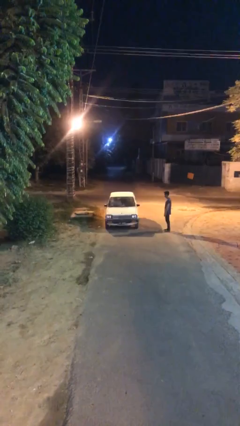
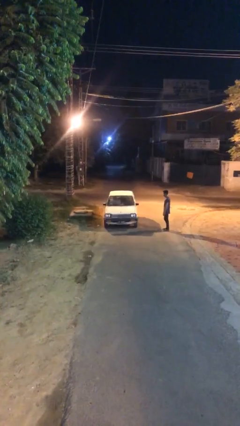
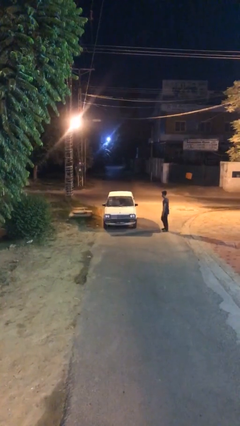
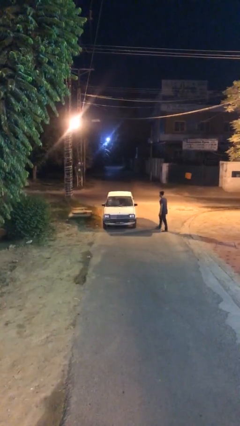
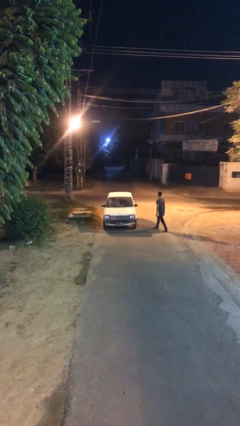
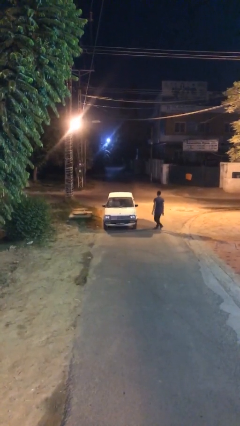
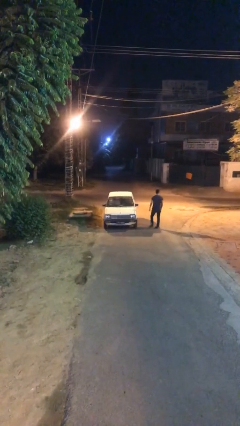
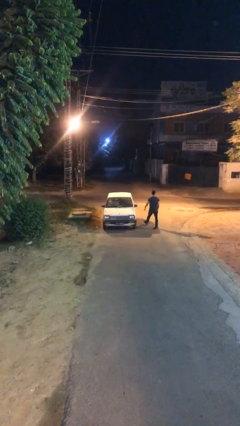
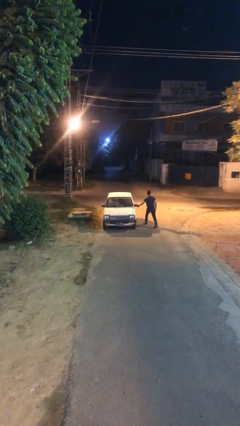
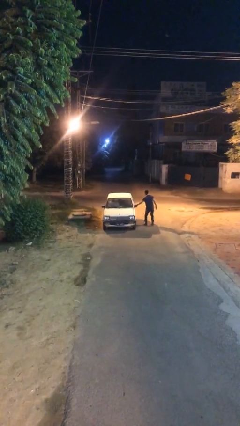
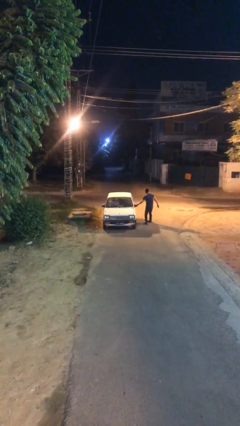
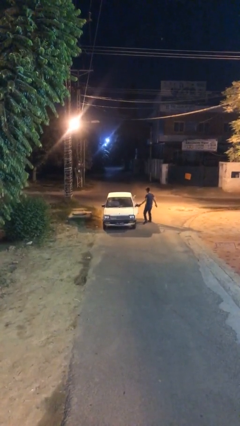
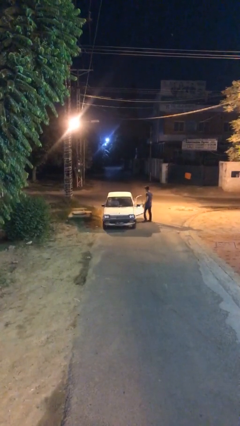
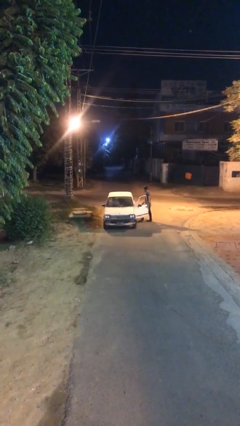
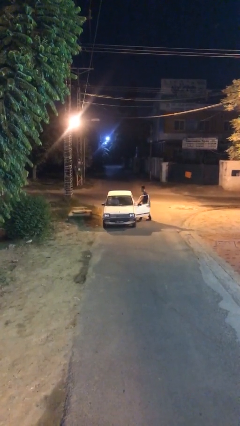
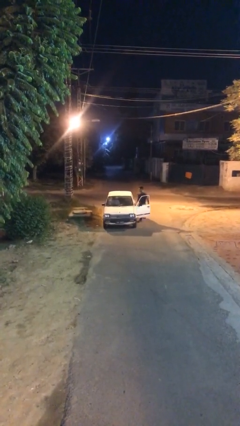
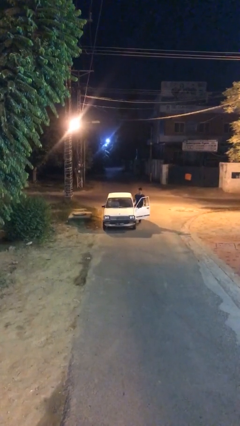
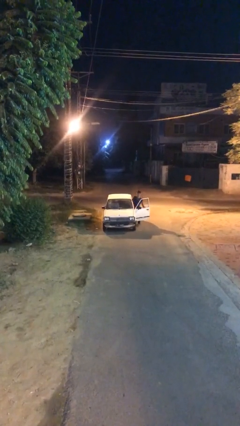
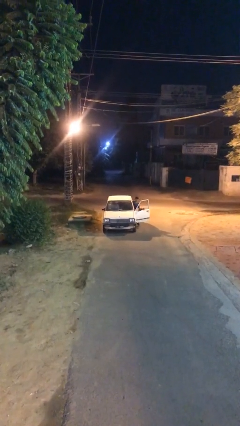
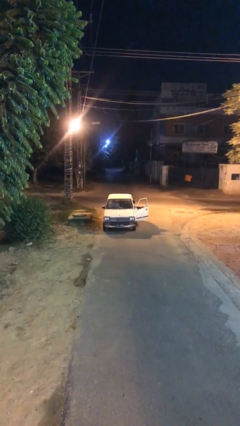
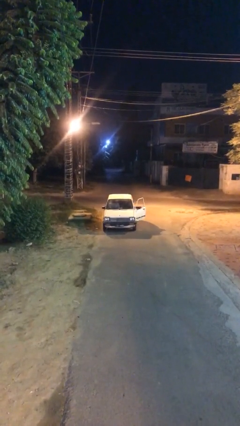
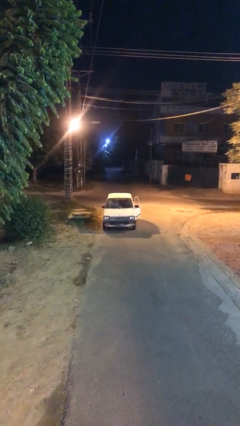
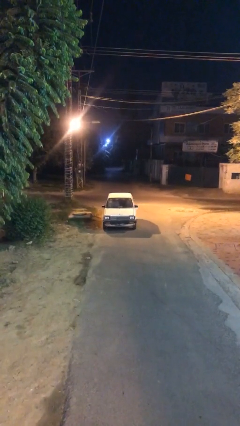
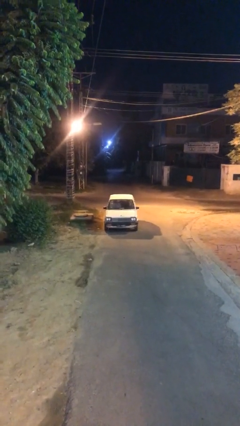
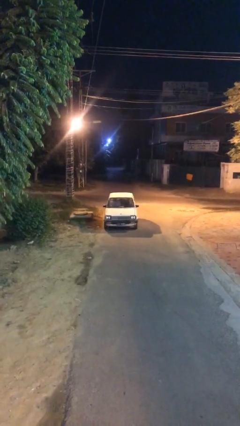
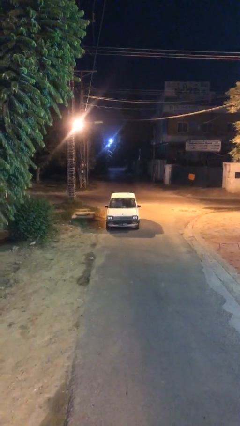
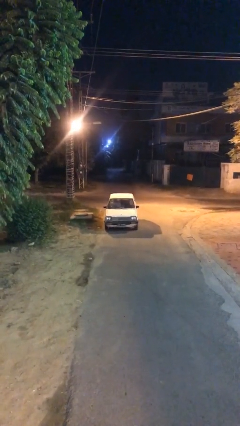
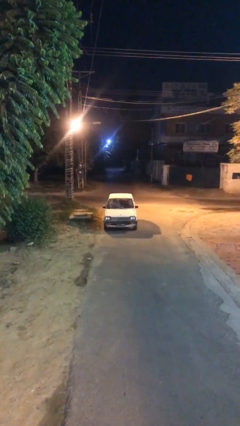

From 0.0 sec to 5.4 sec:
car picks up person

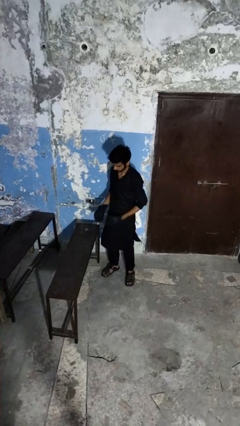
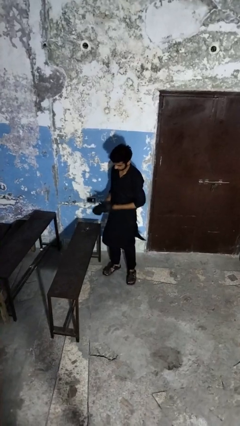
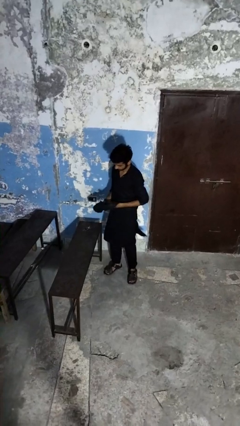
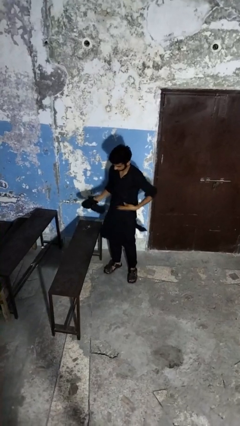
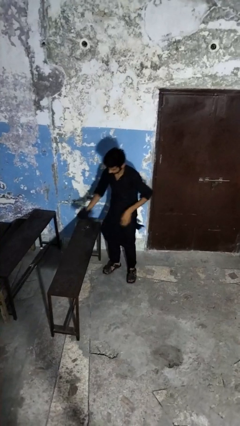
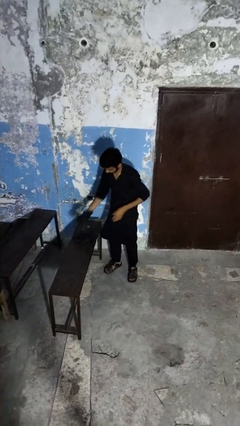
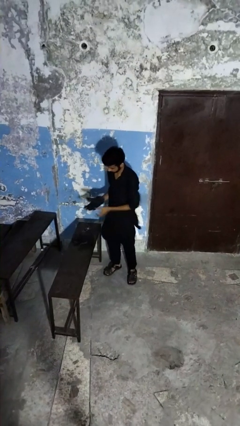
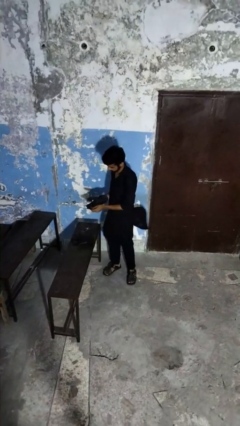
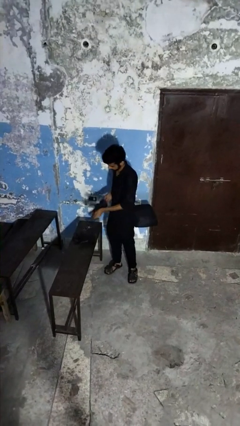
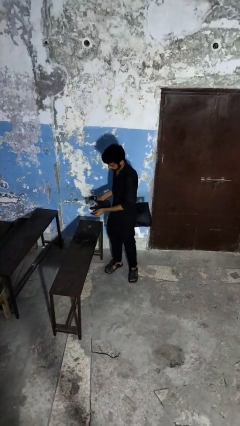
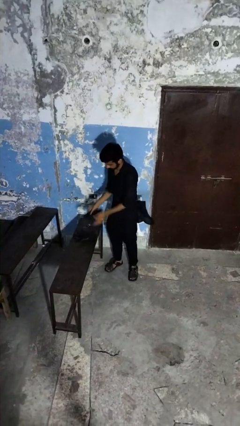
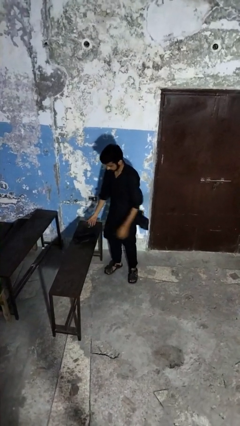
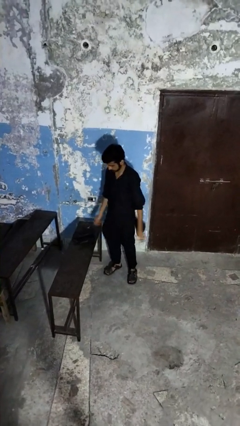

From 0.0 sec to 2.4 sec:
person takes off gloves

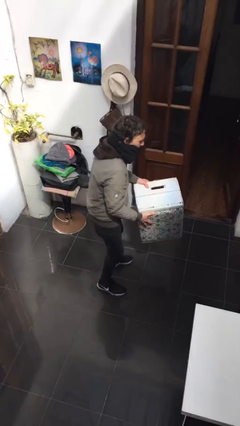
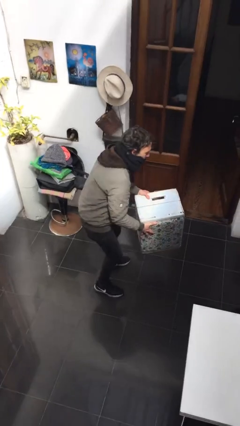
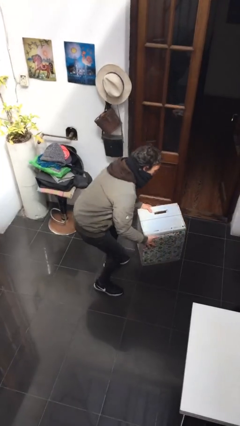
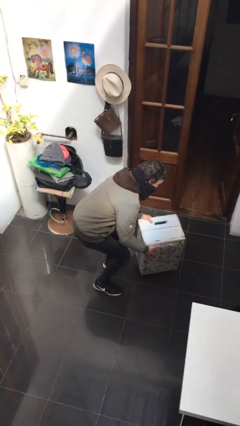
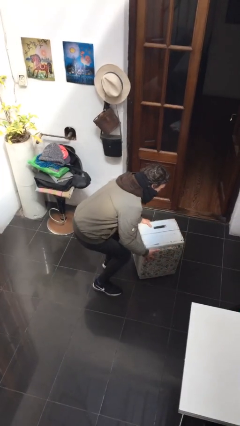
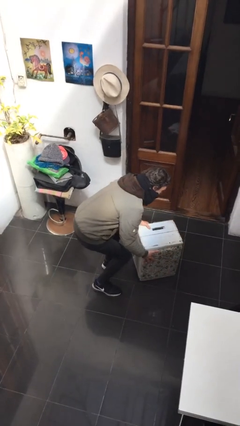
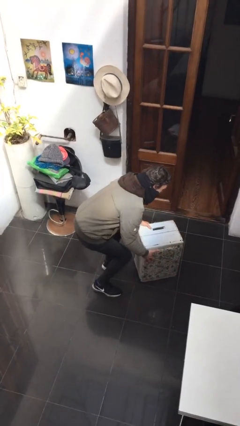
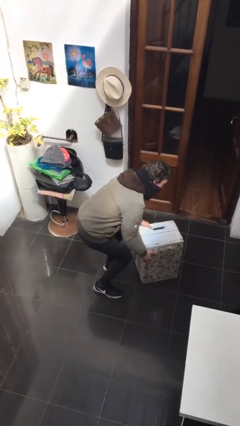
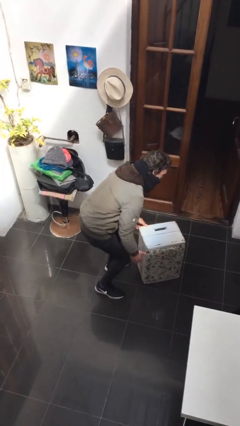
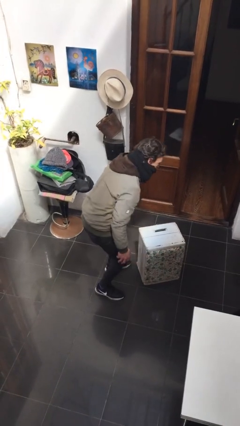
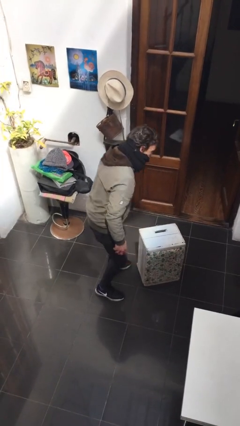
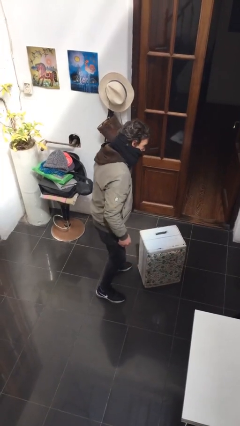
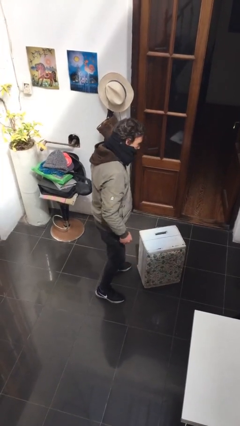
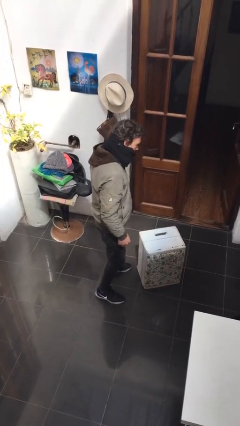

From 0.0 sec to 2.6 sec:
person puts down object on floor

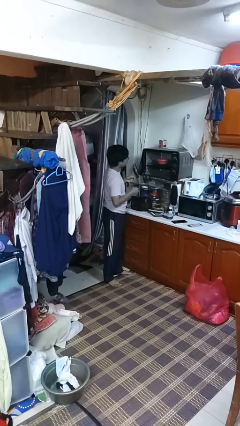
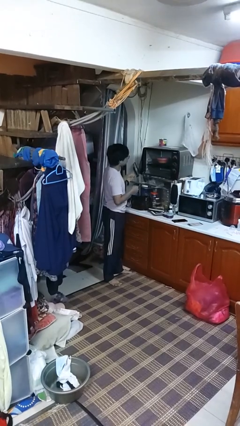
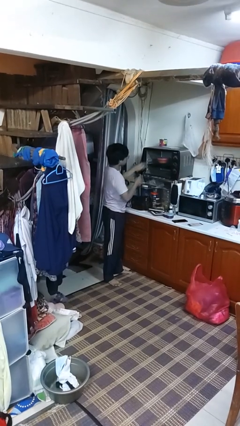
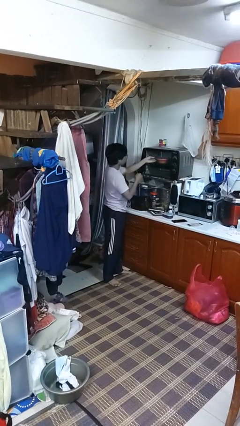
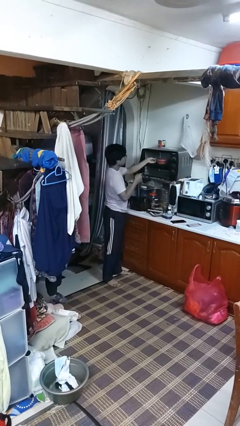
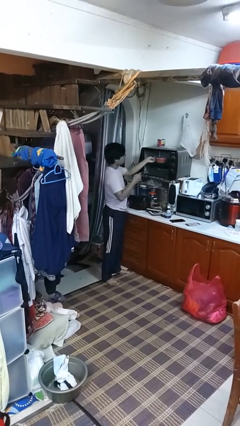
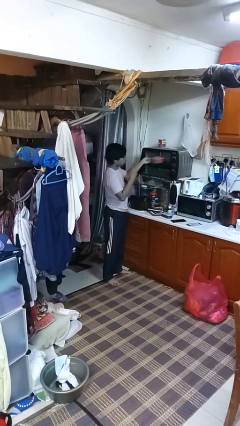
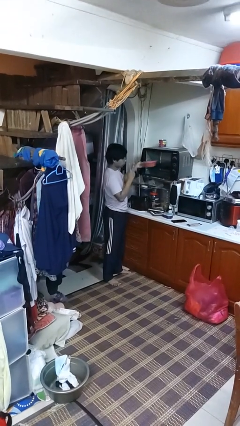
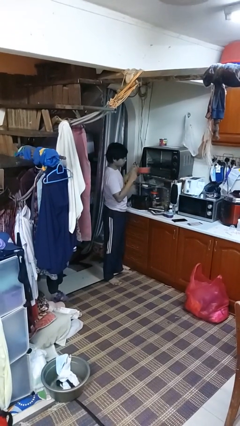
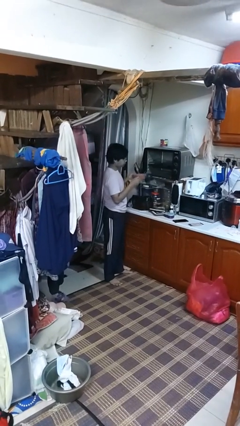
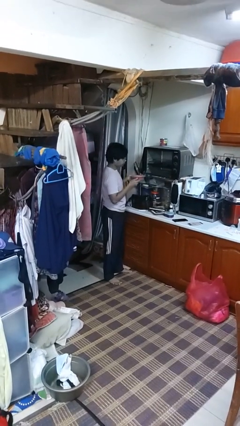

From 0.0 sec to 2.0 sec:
person takes object from oven

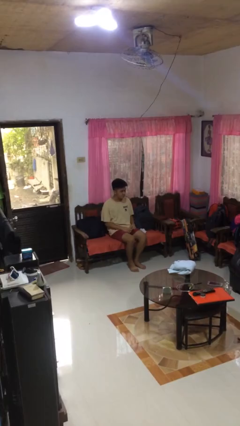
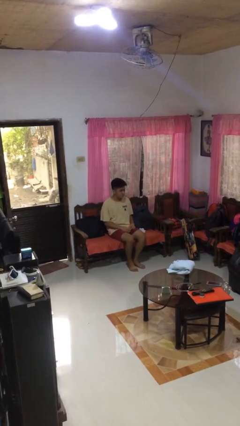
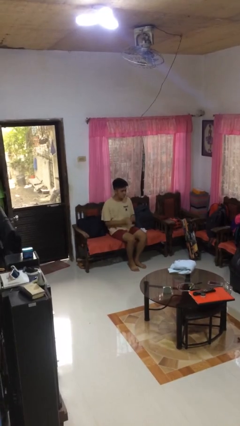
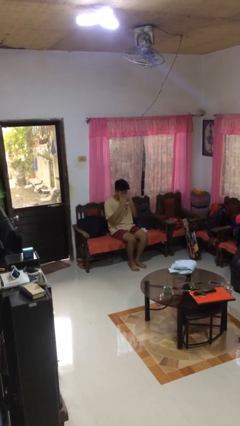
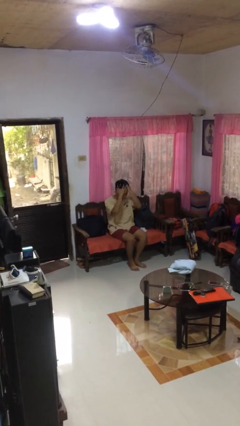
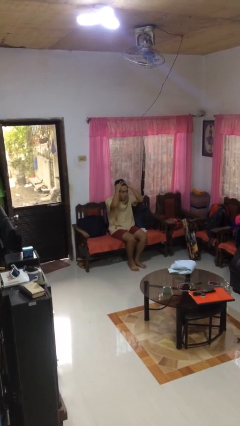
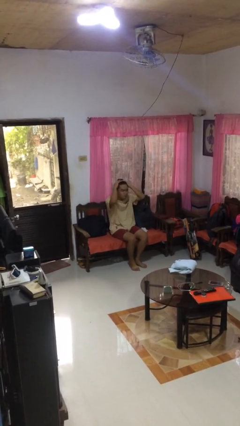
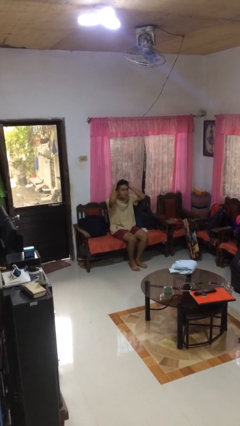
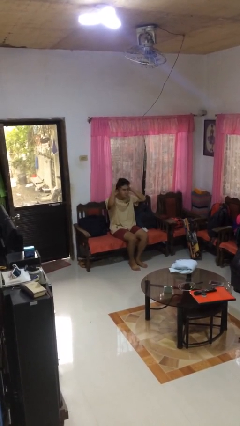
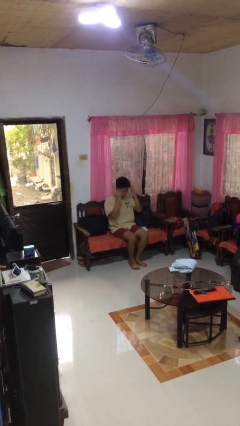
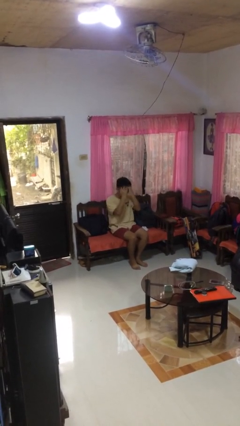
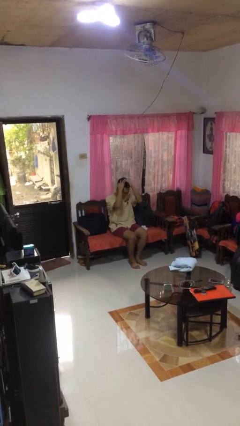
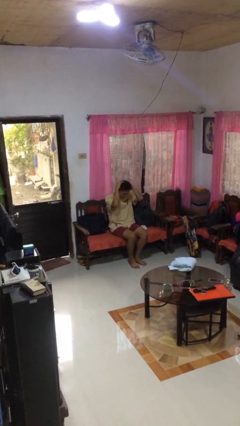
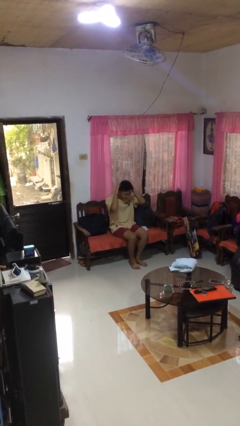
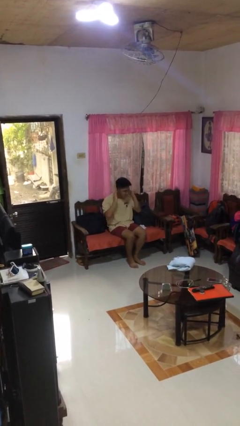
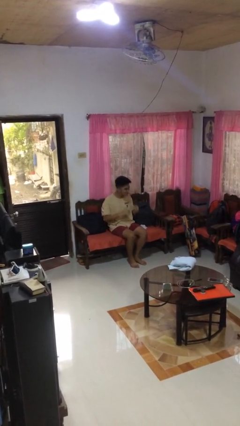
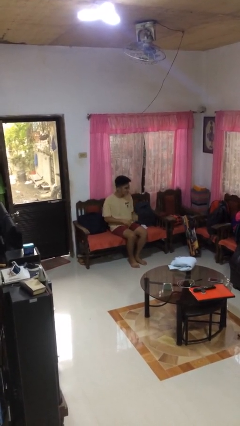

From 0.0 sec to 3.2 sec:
person strokes hair

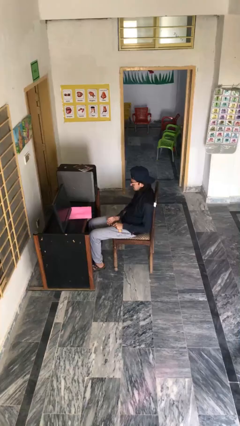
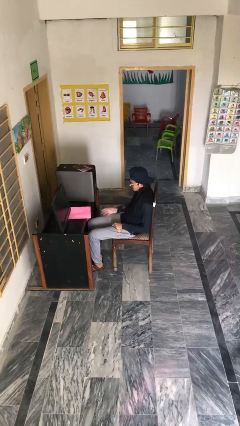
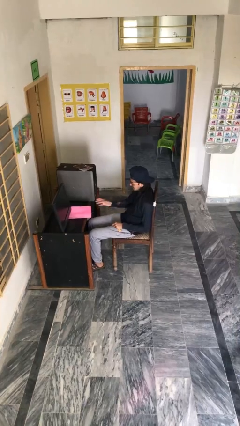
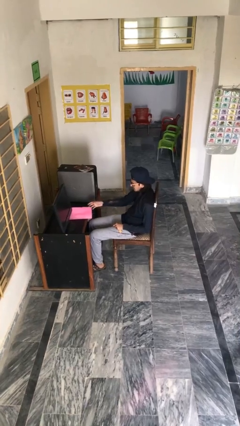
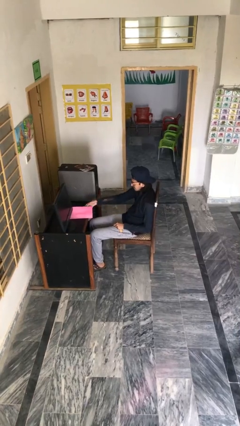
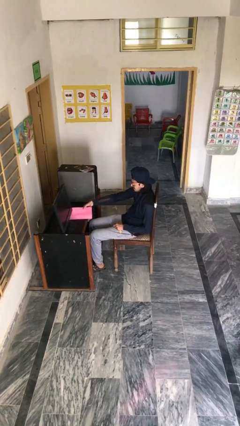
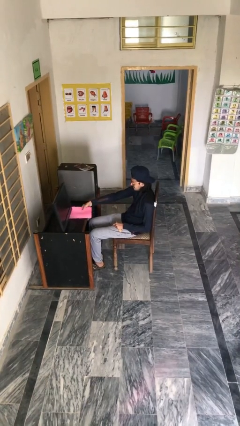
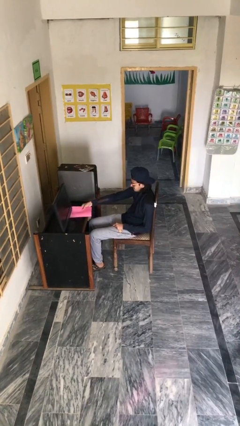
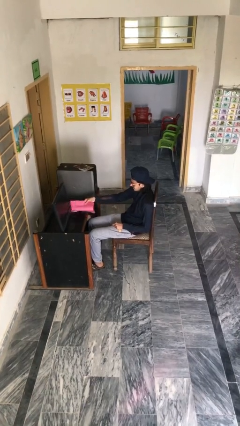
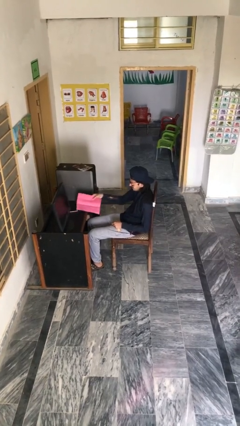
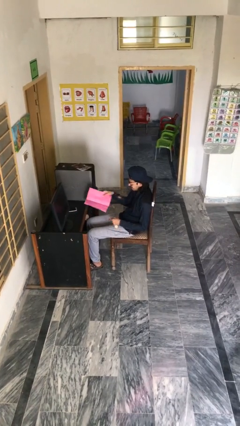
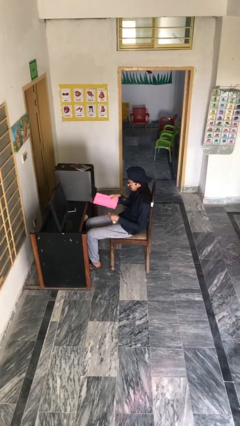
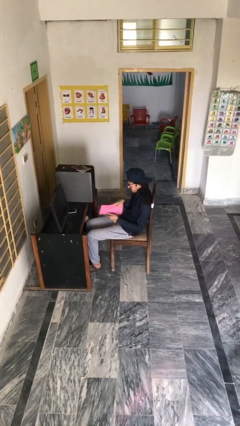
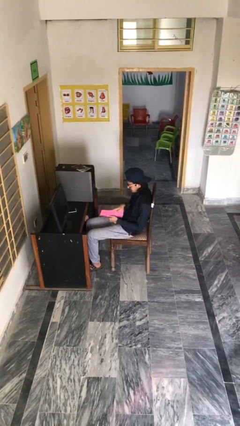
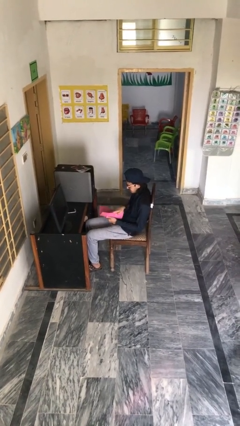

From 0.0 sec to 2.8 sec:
person picks up object from table
